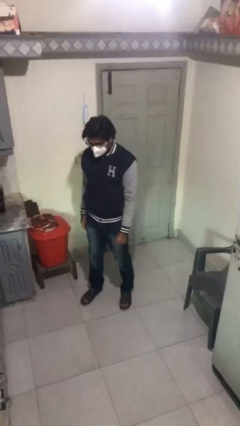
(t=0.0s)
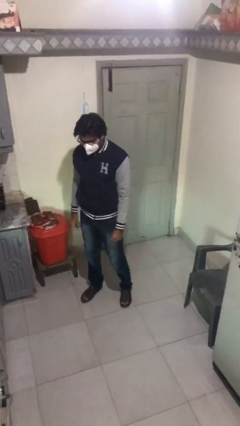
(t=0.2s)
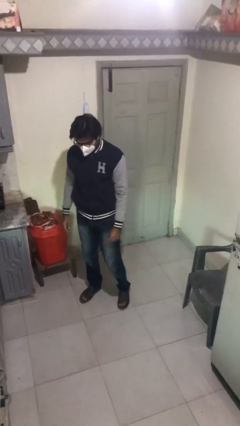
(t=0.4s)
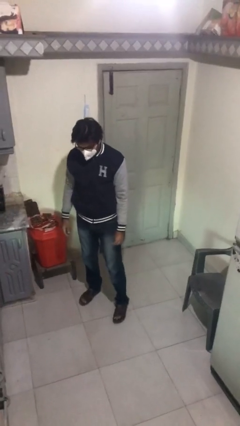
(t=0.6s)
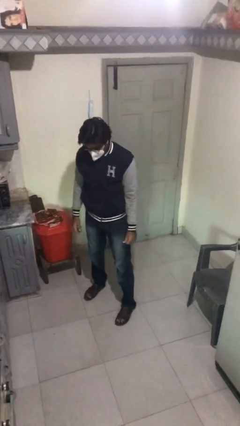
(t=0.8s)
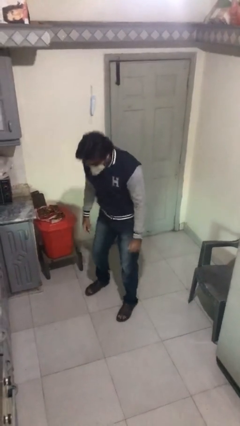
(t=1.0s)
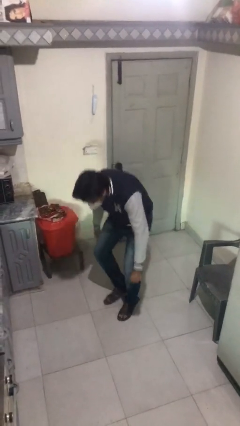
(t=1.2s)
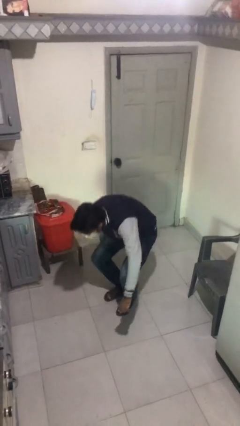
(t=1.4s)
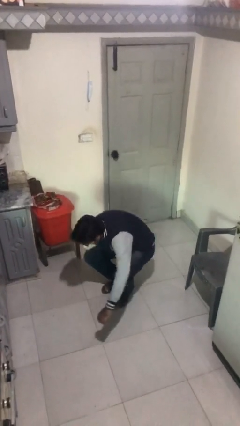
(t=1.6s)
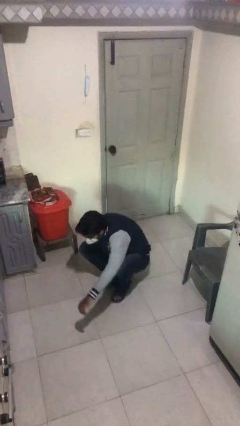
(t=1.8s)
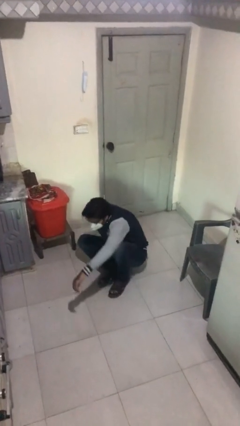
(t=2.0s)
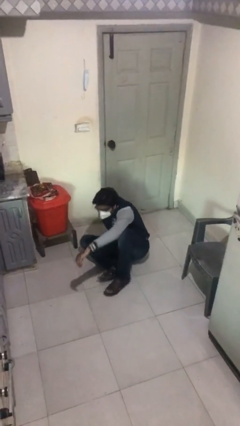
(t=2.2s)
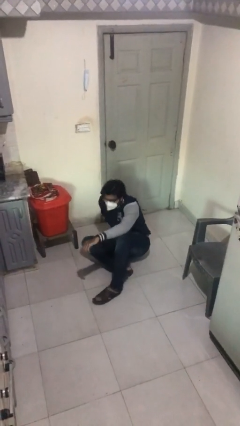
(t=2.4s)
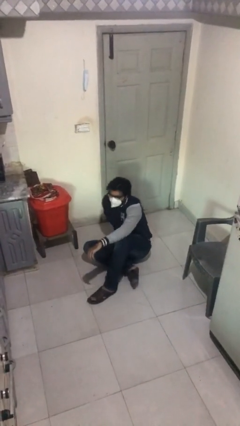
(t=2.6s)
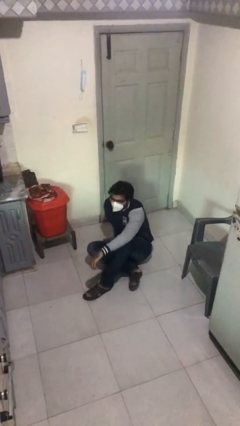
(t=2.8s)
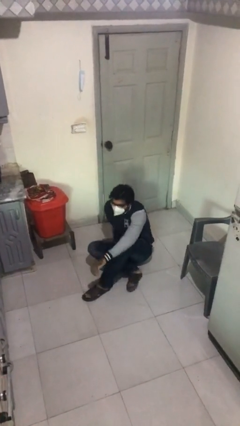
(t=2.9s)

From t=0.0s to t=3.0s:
person sits down

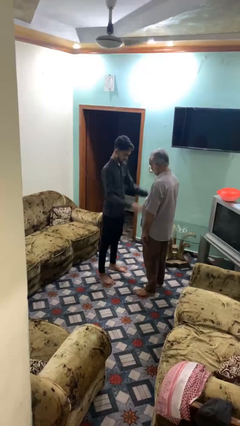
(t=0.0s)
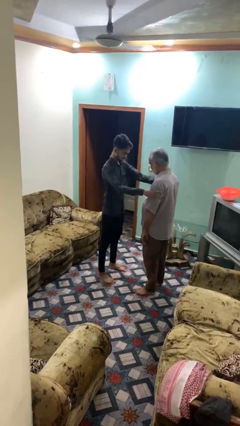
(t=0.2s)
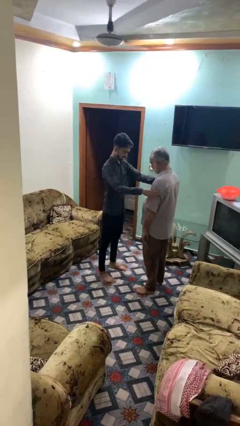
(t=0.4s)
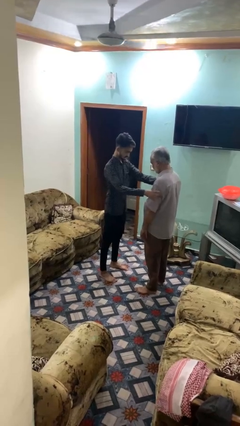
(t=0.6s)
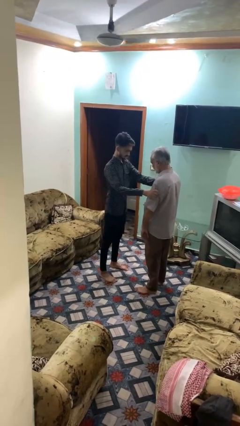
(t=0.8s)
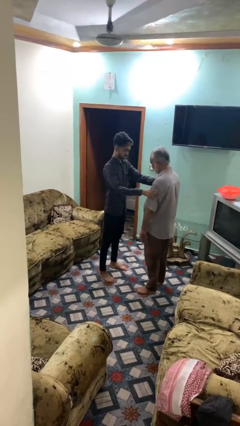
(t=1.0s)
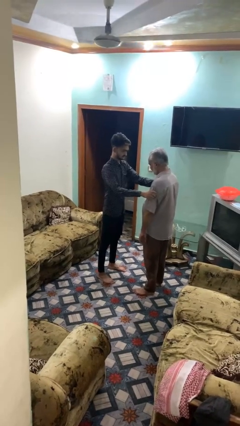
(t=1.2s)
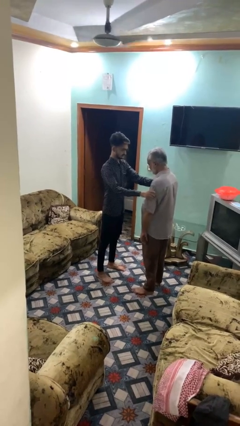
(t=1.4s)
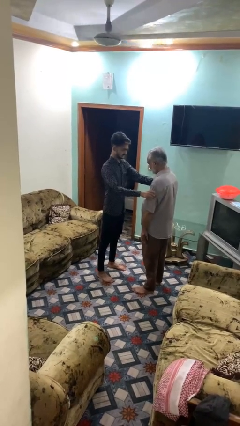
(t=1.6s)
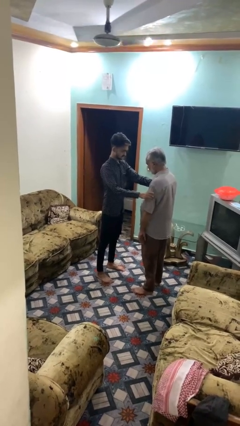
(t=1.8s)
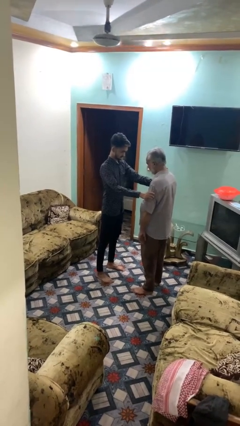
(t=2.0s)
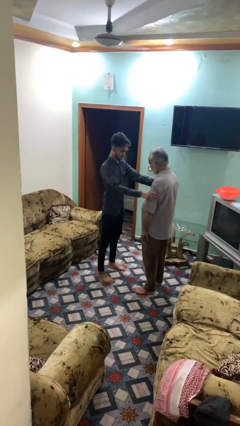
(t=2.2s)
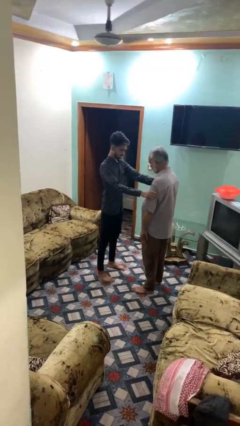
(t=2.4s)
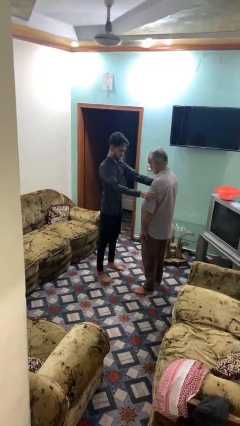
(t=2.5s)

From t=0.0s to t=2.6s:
person grabs person by bicep

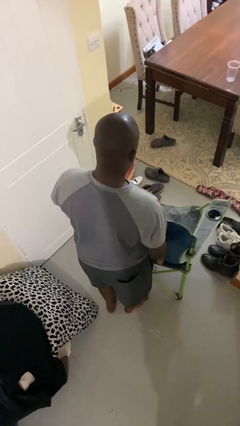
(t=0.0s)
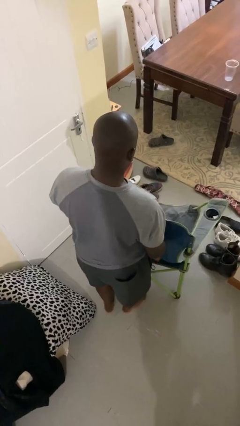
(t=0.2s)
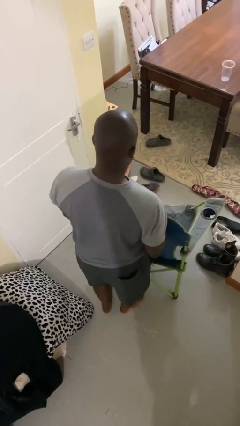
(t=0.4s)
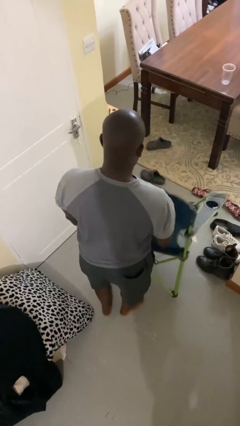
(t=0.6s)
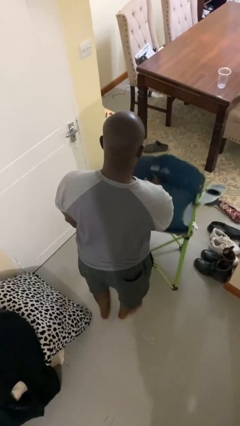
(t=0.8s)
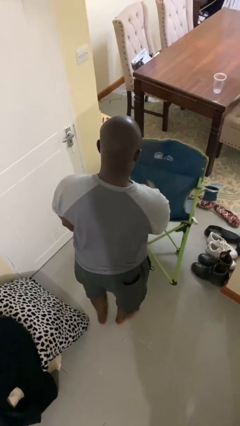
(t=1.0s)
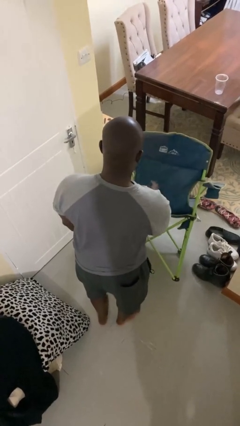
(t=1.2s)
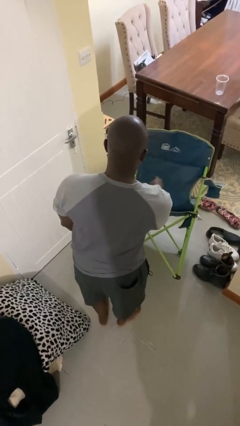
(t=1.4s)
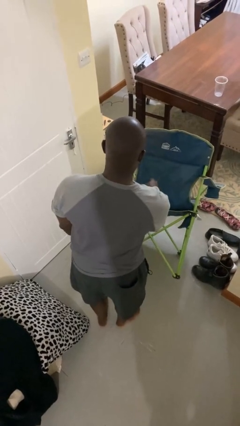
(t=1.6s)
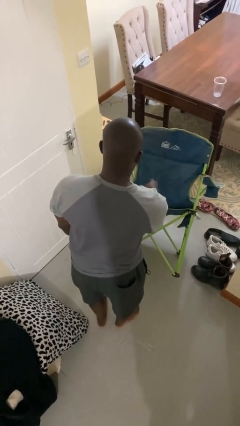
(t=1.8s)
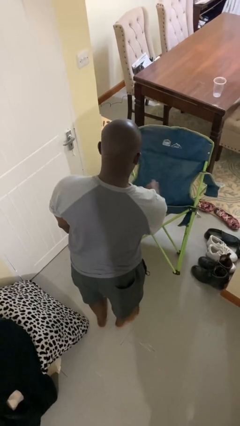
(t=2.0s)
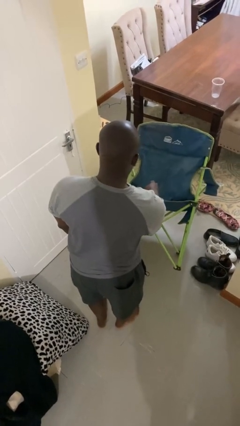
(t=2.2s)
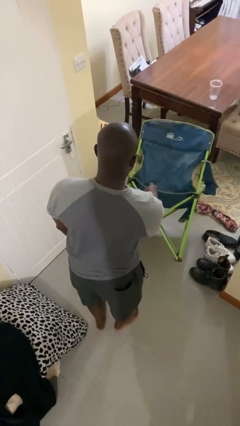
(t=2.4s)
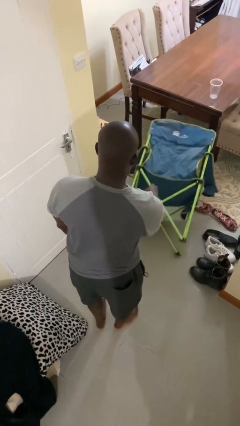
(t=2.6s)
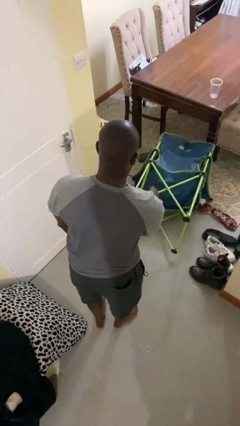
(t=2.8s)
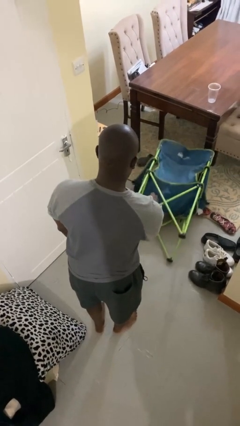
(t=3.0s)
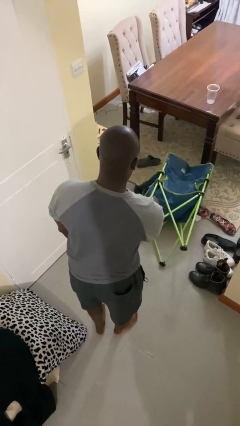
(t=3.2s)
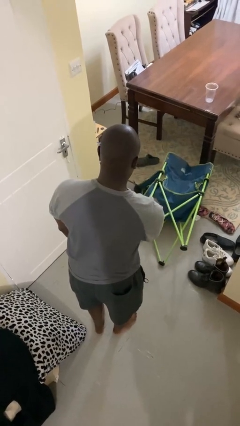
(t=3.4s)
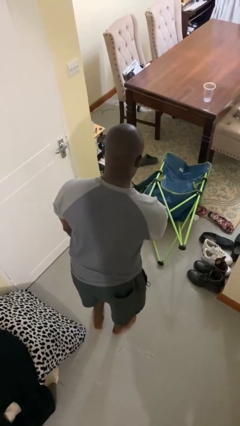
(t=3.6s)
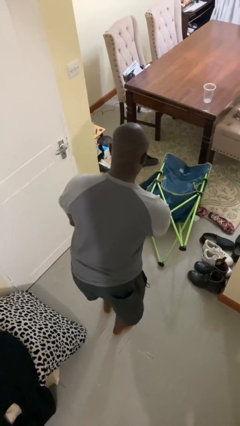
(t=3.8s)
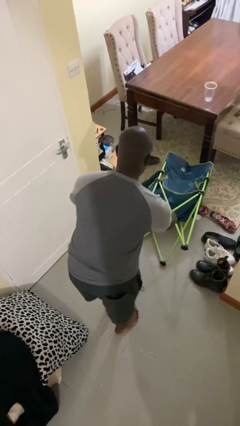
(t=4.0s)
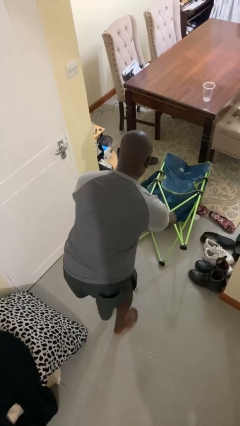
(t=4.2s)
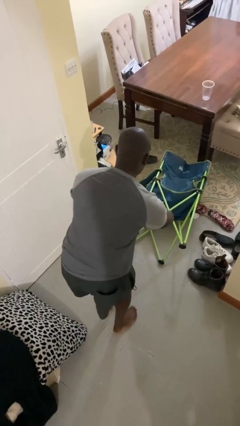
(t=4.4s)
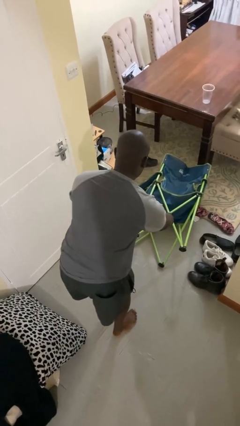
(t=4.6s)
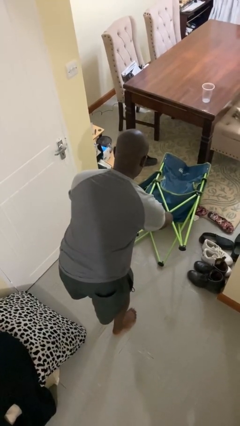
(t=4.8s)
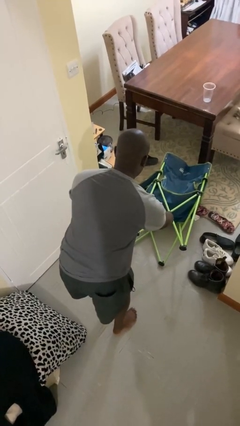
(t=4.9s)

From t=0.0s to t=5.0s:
person knocks over furniture

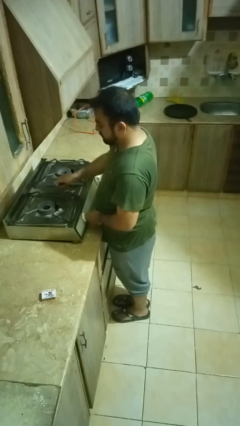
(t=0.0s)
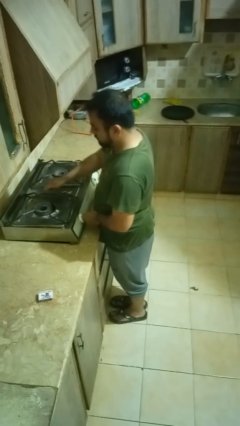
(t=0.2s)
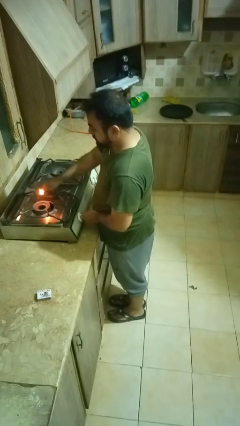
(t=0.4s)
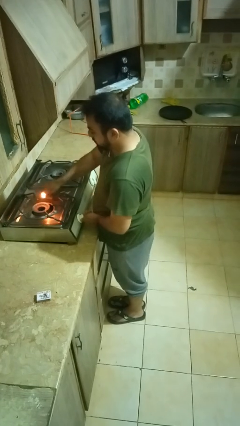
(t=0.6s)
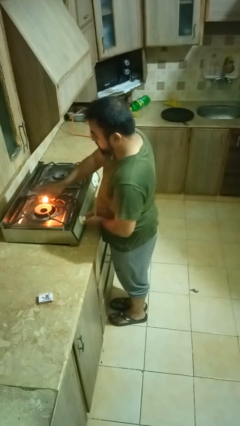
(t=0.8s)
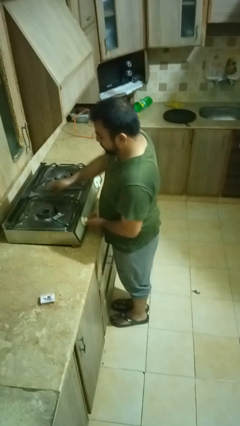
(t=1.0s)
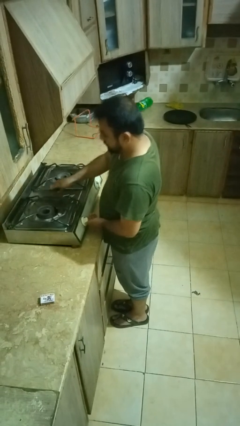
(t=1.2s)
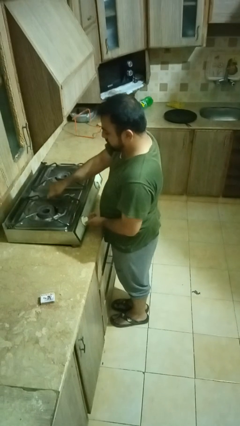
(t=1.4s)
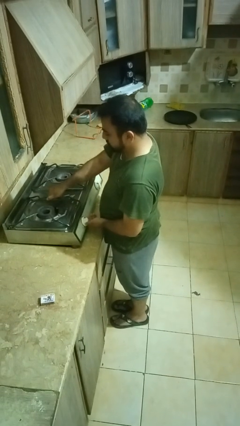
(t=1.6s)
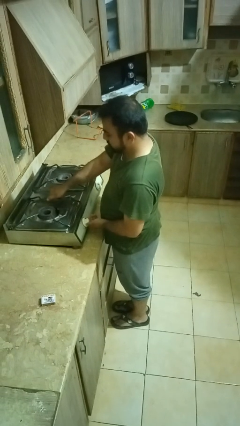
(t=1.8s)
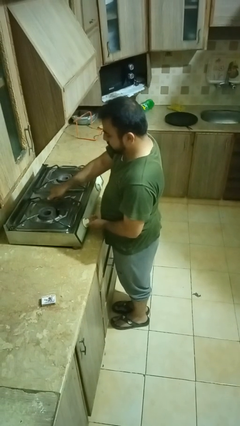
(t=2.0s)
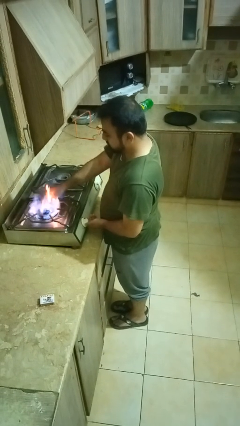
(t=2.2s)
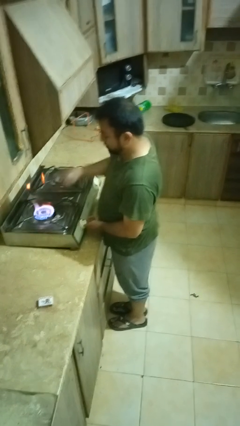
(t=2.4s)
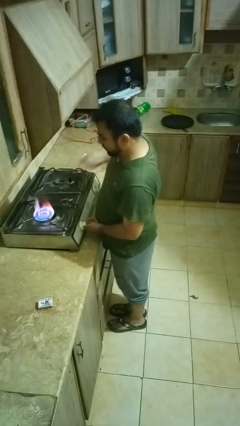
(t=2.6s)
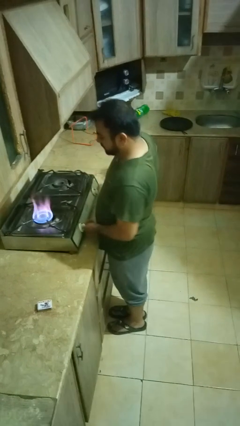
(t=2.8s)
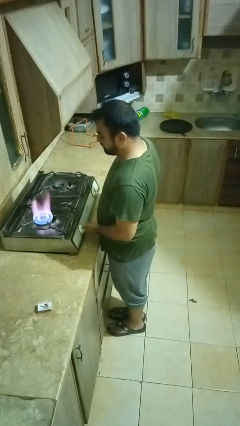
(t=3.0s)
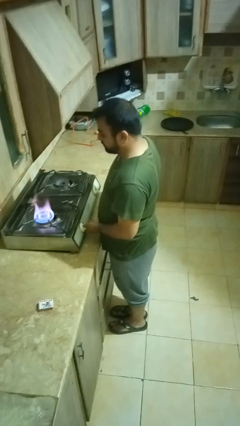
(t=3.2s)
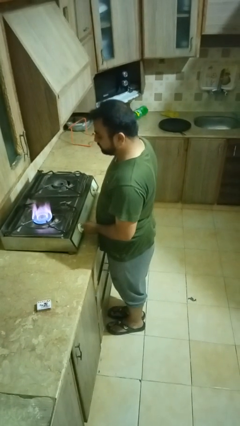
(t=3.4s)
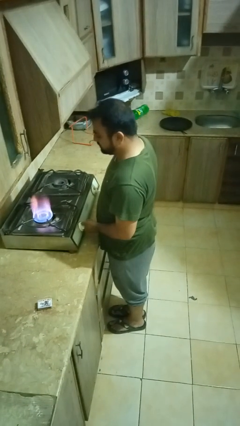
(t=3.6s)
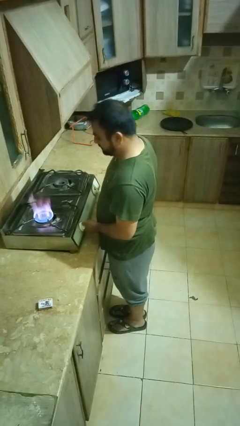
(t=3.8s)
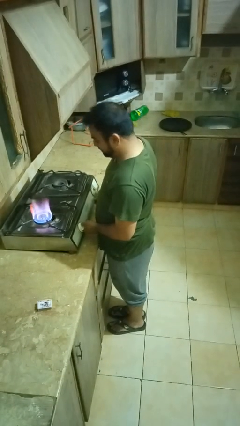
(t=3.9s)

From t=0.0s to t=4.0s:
person turns on stovetop

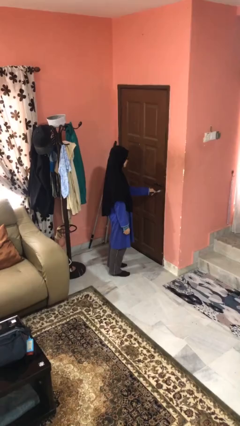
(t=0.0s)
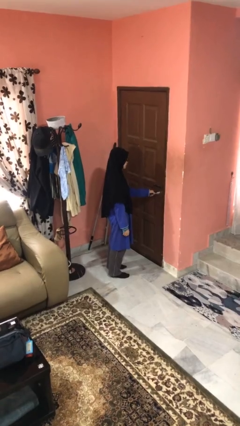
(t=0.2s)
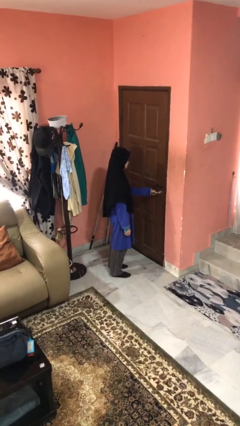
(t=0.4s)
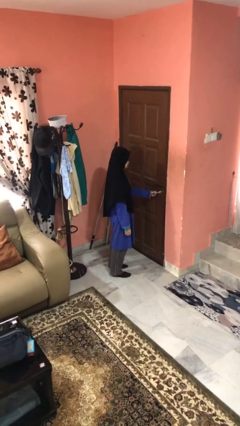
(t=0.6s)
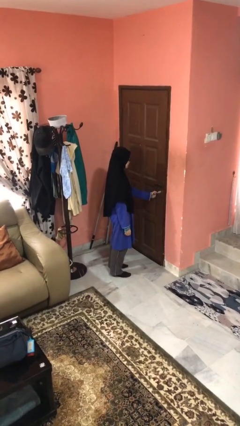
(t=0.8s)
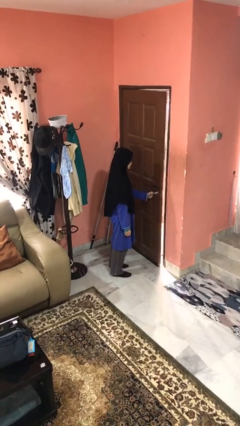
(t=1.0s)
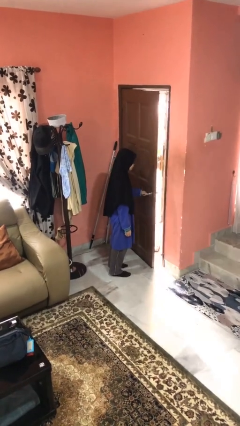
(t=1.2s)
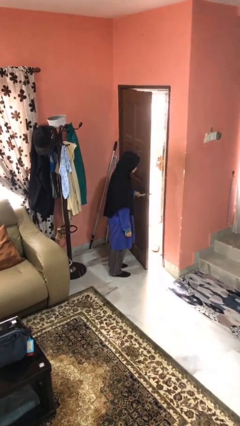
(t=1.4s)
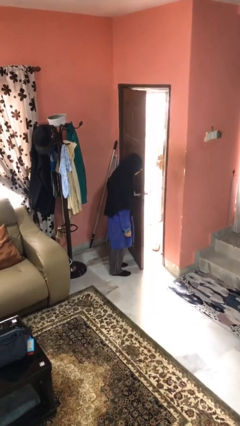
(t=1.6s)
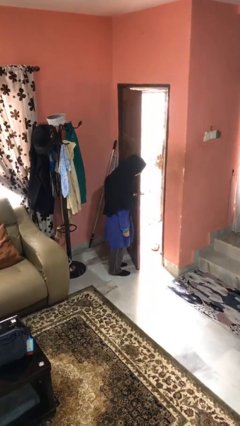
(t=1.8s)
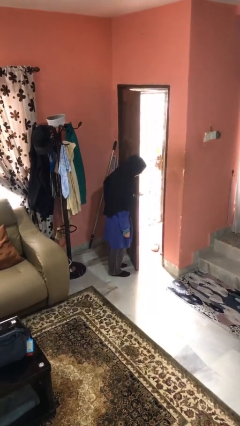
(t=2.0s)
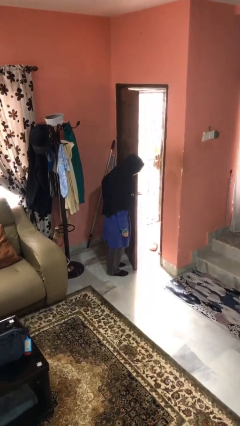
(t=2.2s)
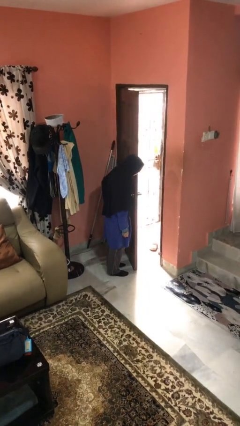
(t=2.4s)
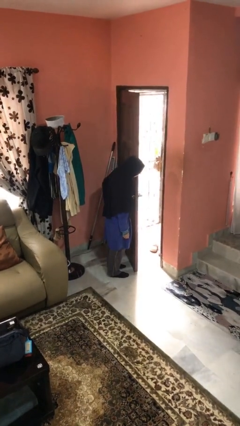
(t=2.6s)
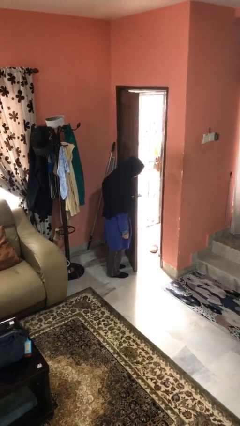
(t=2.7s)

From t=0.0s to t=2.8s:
person opens facility door
